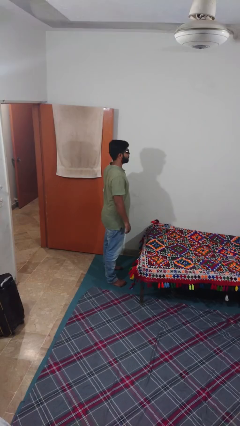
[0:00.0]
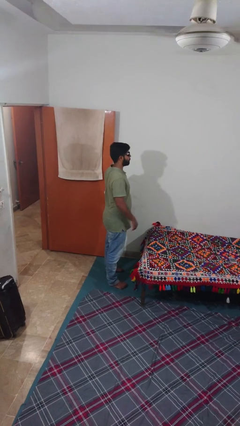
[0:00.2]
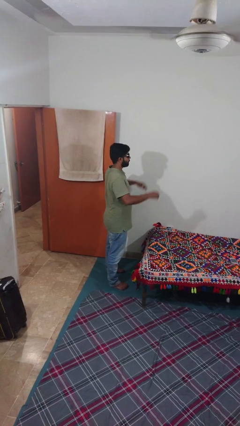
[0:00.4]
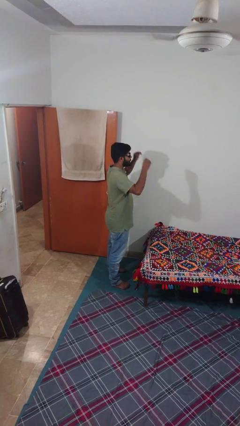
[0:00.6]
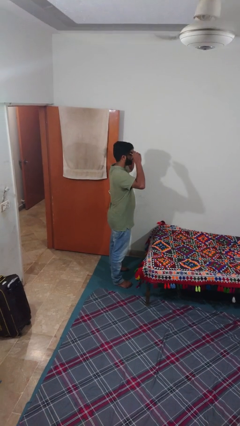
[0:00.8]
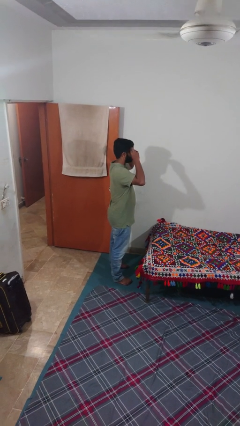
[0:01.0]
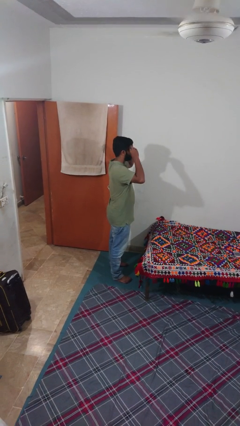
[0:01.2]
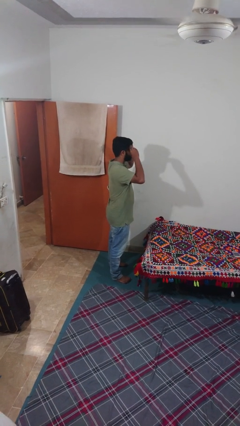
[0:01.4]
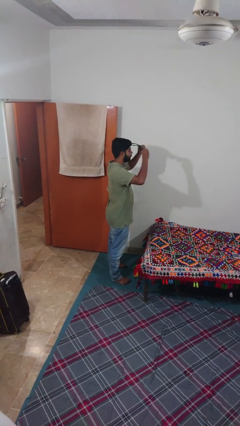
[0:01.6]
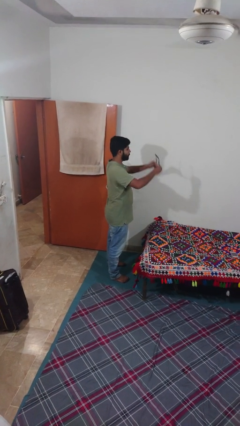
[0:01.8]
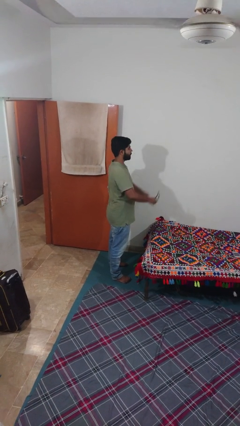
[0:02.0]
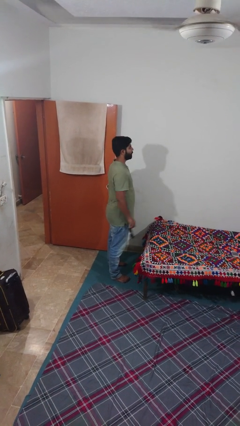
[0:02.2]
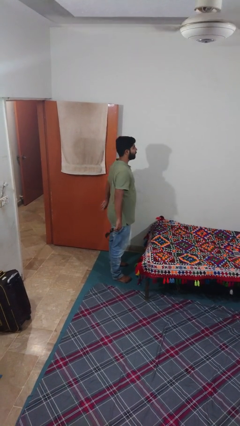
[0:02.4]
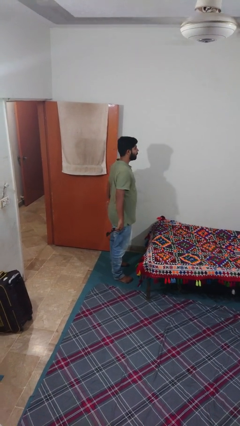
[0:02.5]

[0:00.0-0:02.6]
person takes off sunglasses

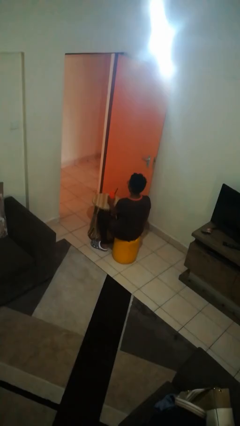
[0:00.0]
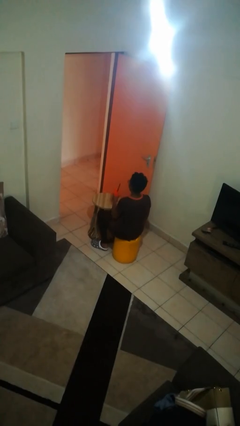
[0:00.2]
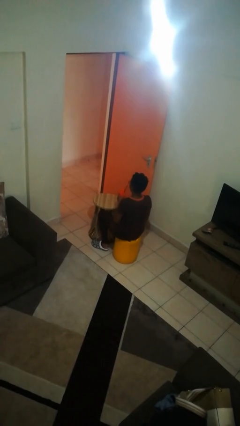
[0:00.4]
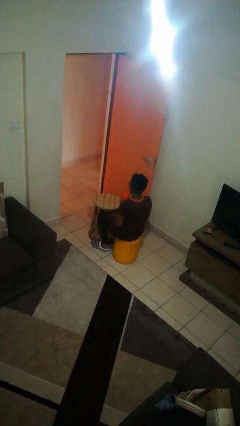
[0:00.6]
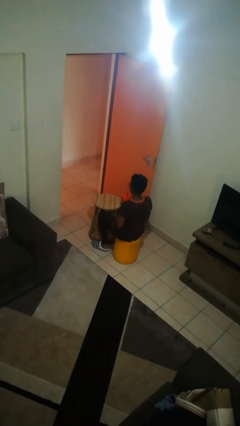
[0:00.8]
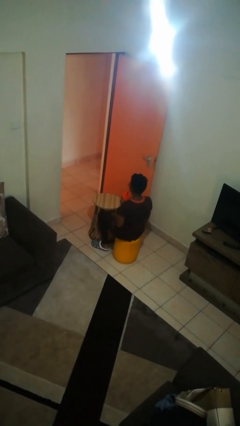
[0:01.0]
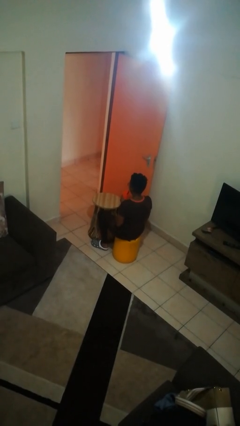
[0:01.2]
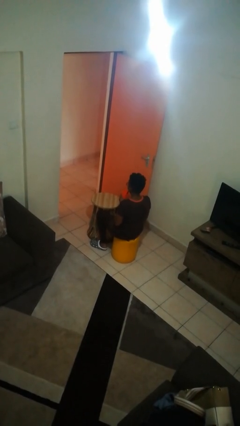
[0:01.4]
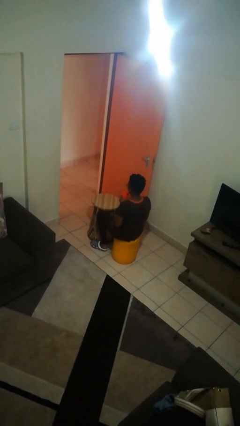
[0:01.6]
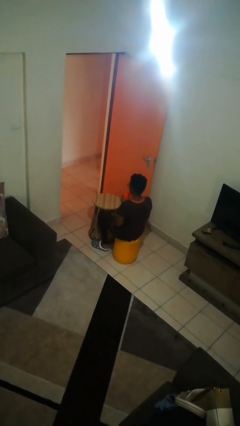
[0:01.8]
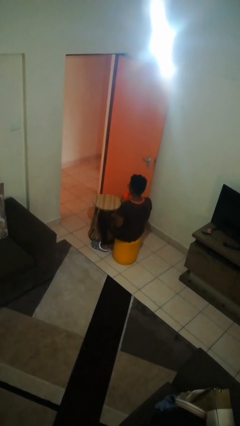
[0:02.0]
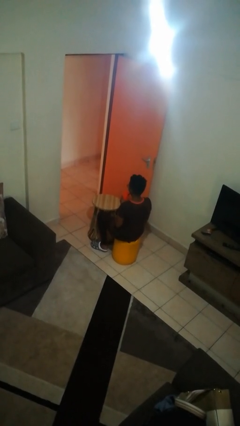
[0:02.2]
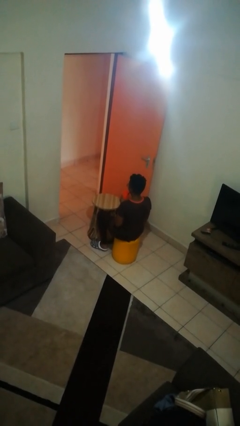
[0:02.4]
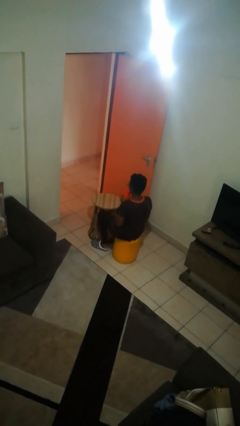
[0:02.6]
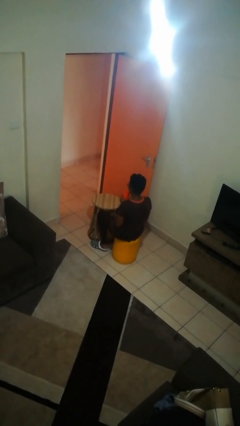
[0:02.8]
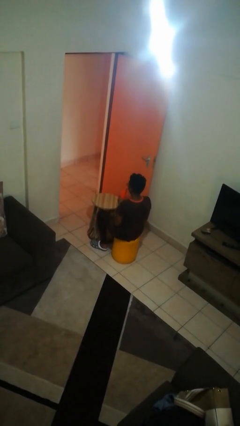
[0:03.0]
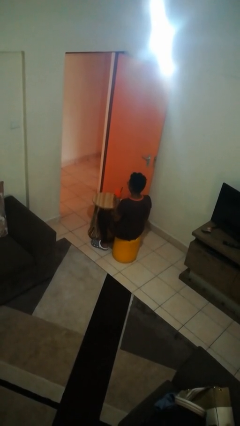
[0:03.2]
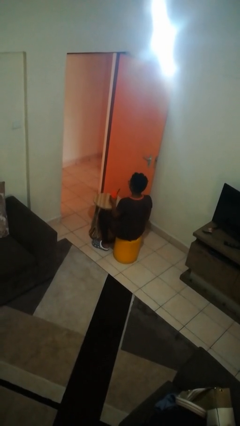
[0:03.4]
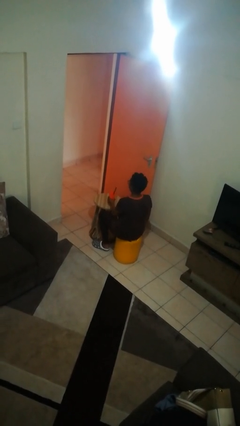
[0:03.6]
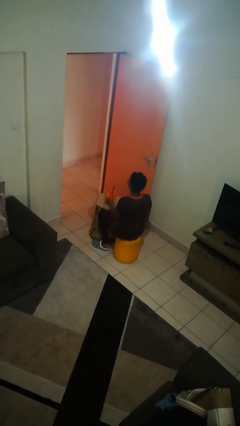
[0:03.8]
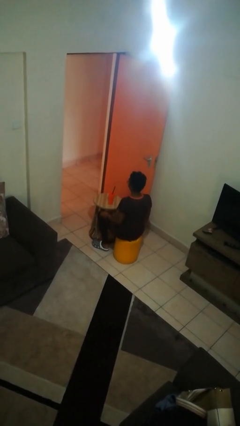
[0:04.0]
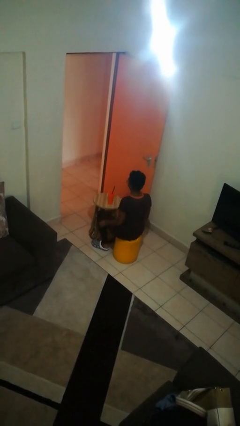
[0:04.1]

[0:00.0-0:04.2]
person drinks from straw

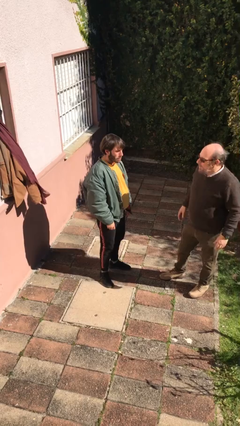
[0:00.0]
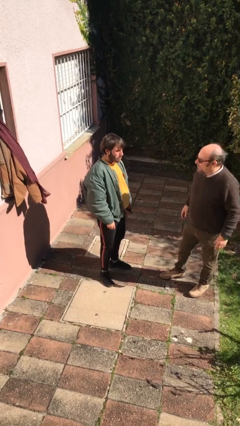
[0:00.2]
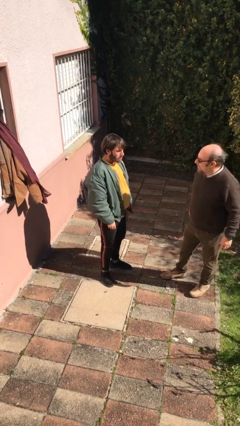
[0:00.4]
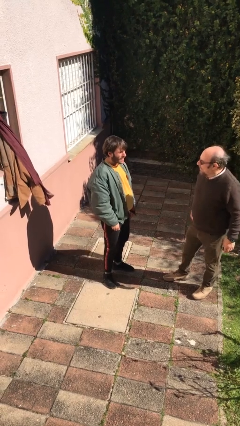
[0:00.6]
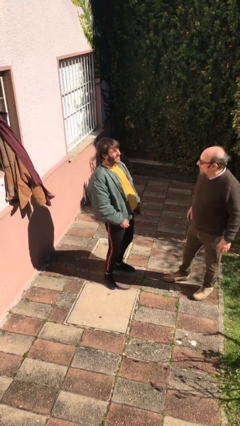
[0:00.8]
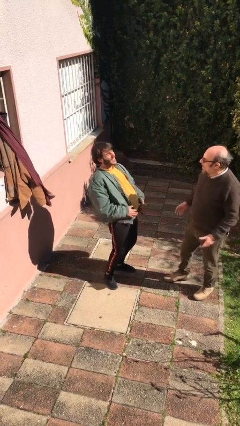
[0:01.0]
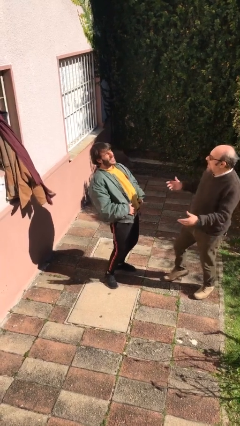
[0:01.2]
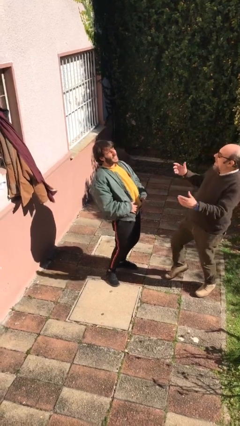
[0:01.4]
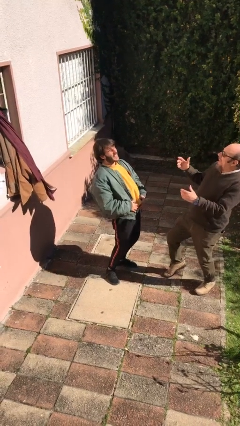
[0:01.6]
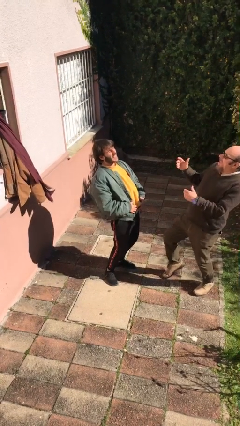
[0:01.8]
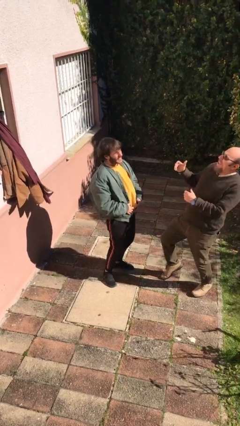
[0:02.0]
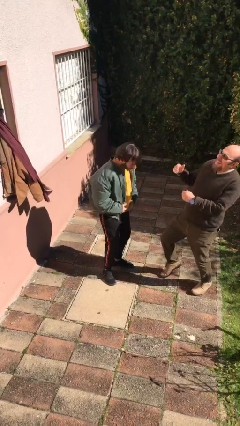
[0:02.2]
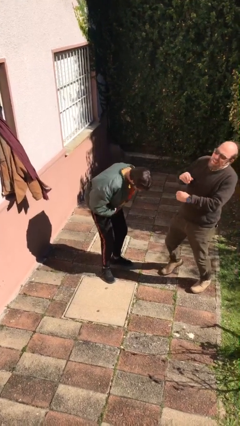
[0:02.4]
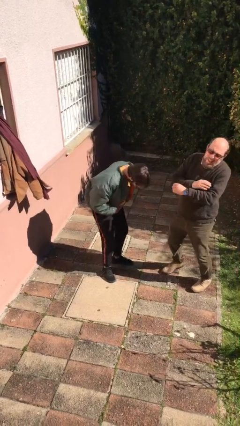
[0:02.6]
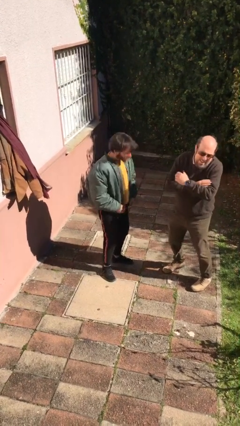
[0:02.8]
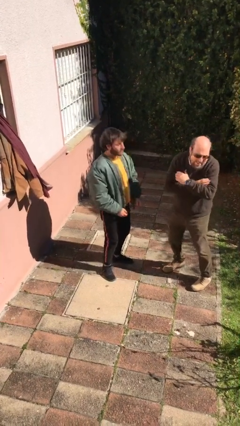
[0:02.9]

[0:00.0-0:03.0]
person laughs with person

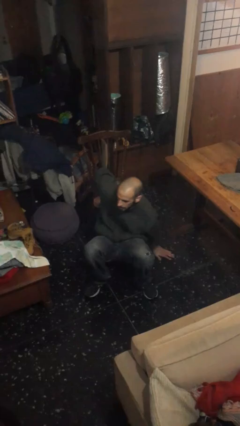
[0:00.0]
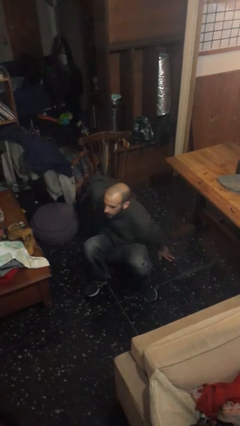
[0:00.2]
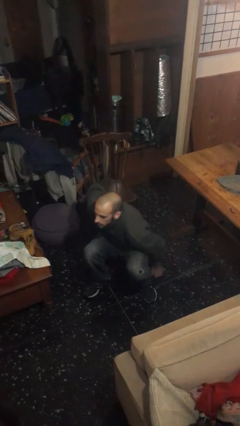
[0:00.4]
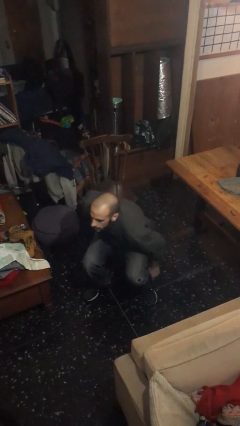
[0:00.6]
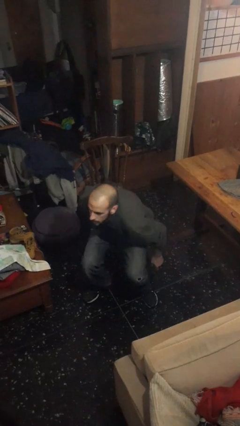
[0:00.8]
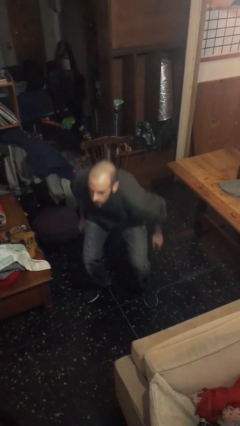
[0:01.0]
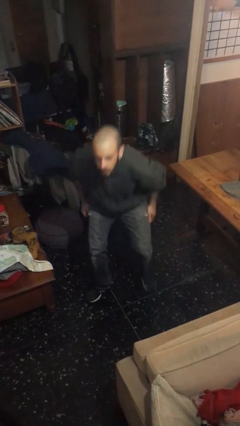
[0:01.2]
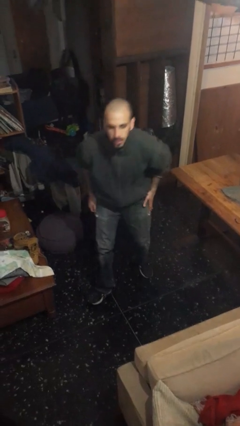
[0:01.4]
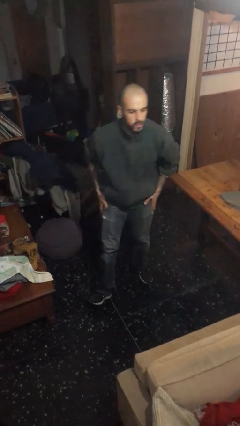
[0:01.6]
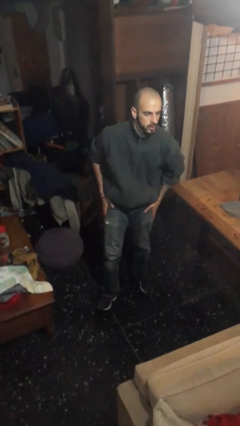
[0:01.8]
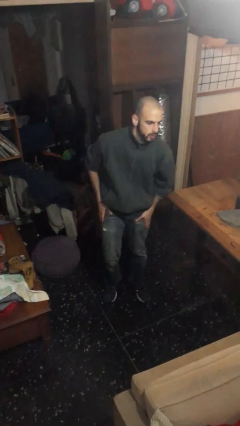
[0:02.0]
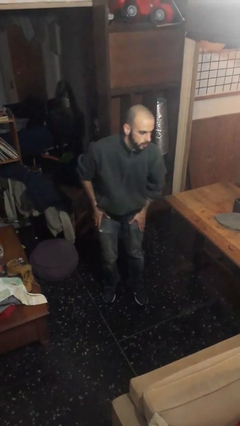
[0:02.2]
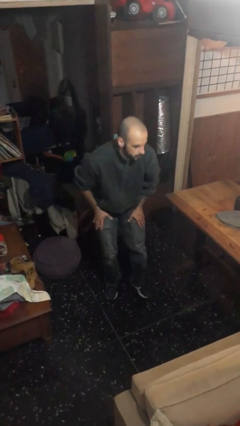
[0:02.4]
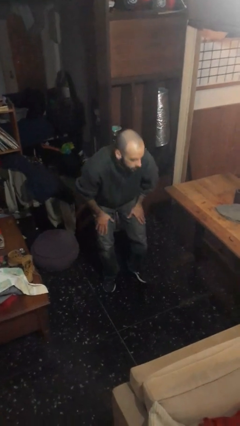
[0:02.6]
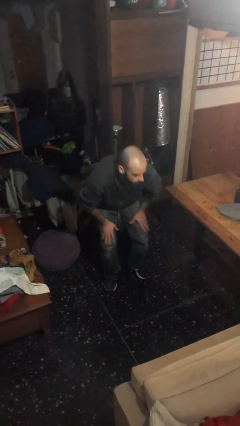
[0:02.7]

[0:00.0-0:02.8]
person stands up from floor

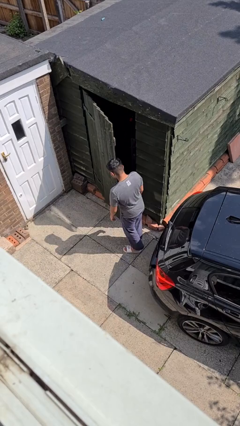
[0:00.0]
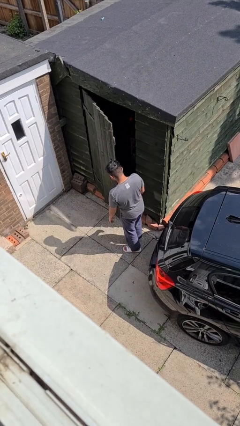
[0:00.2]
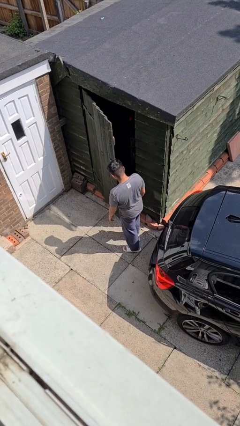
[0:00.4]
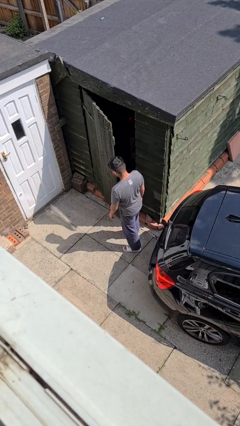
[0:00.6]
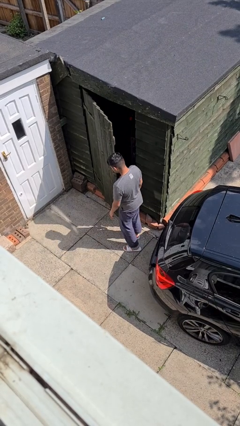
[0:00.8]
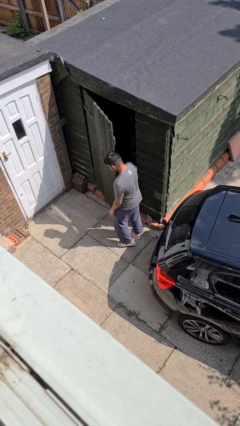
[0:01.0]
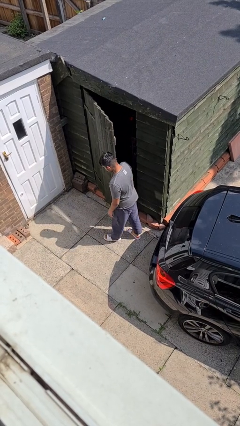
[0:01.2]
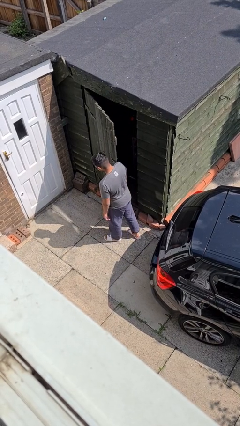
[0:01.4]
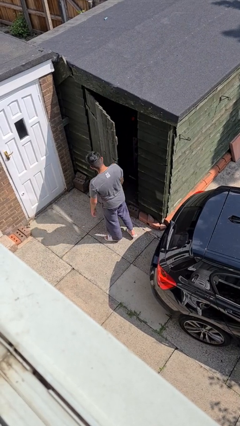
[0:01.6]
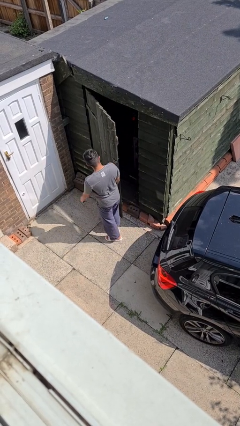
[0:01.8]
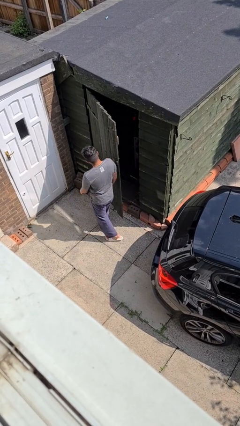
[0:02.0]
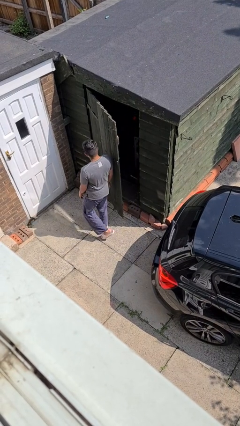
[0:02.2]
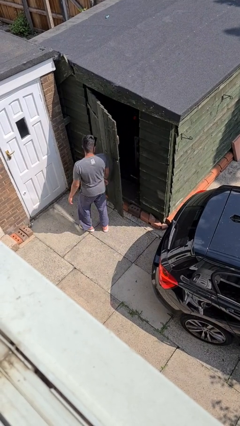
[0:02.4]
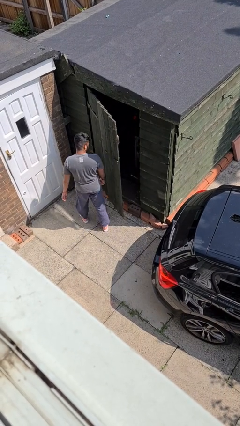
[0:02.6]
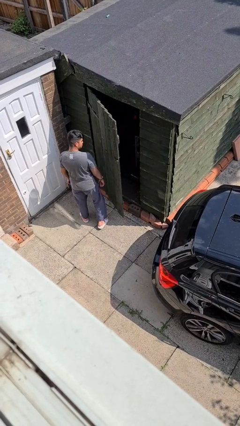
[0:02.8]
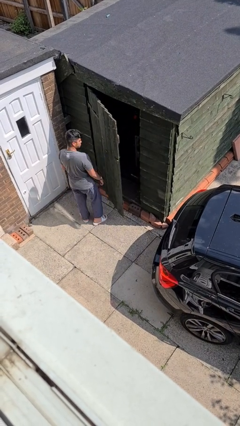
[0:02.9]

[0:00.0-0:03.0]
person bumps into wall

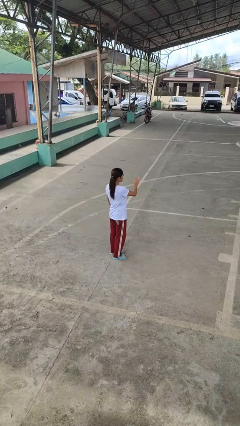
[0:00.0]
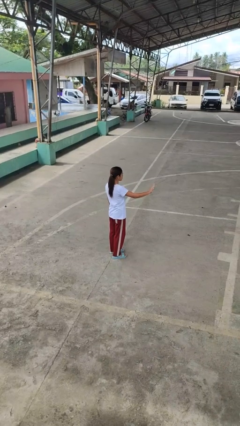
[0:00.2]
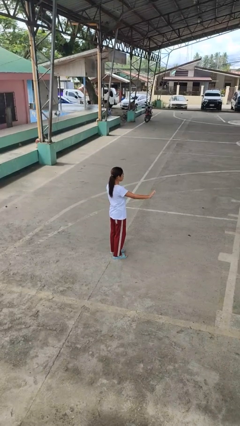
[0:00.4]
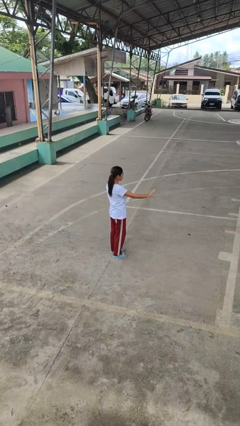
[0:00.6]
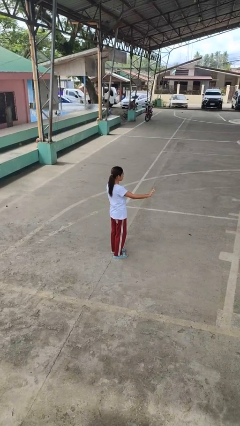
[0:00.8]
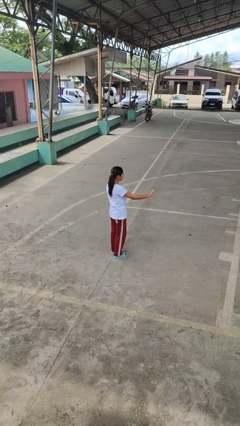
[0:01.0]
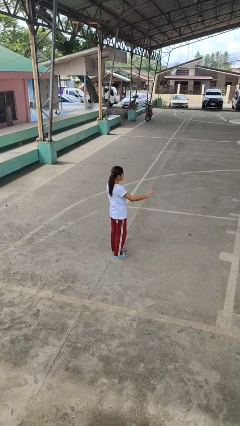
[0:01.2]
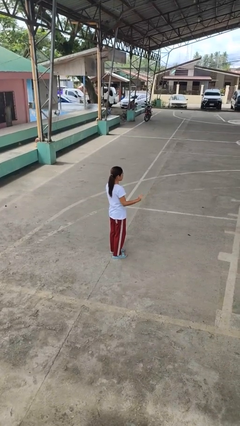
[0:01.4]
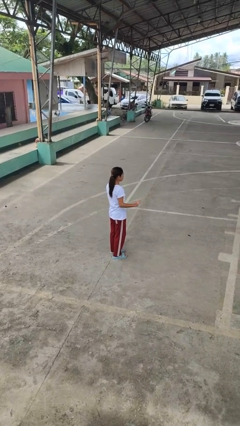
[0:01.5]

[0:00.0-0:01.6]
person gestures swipe right
